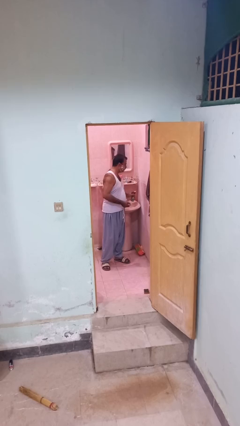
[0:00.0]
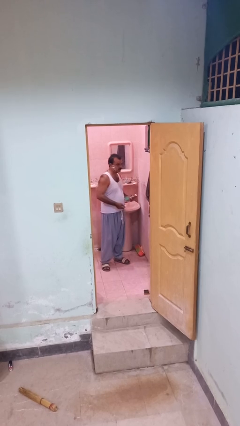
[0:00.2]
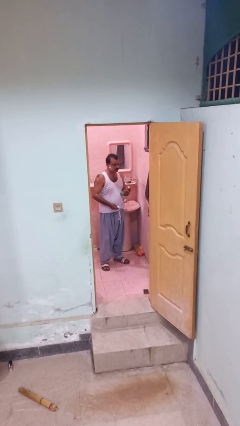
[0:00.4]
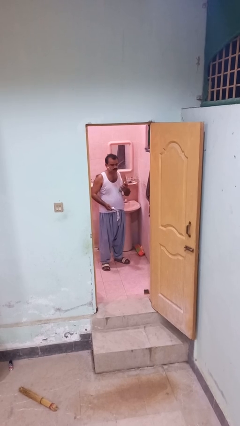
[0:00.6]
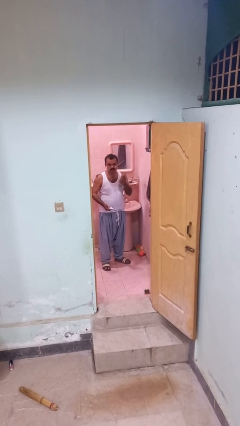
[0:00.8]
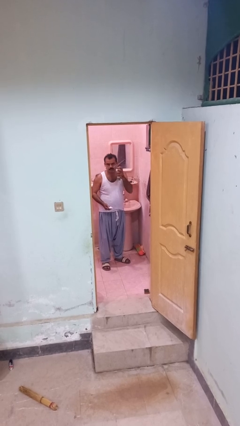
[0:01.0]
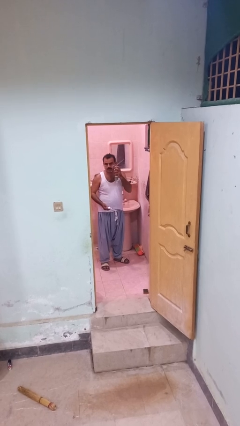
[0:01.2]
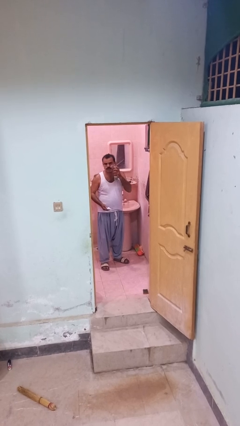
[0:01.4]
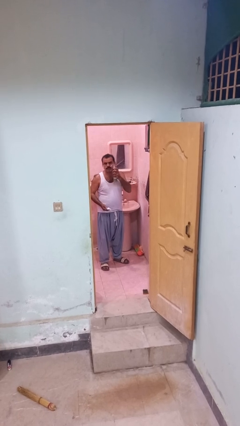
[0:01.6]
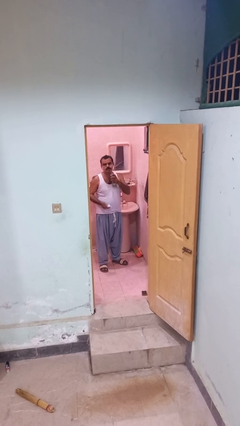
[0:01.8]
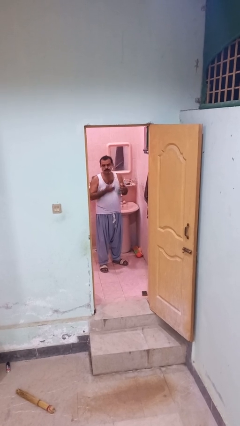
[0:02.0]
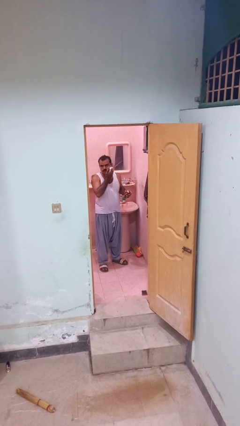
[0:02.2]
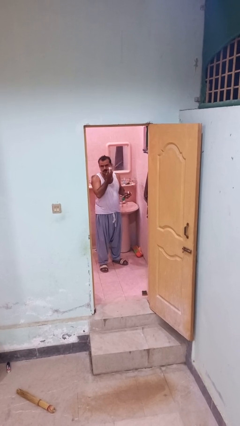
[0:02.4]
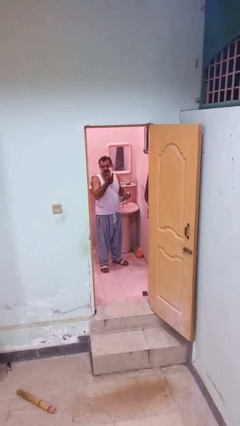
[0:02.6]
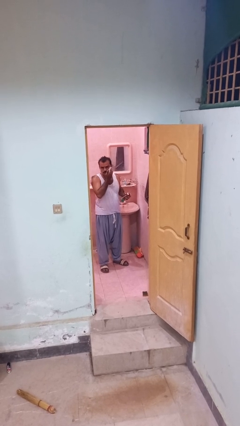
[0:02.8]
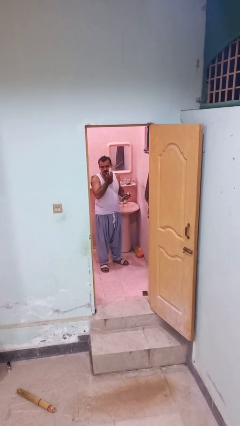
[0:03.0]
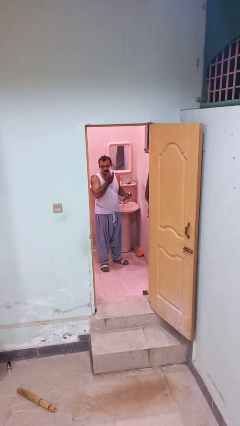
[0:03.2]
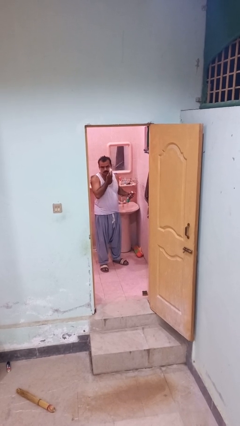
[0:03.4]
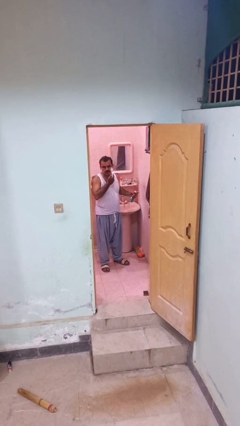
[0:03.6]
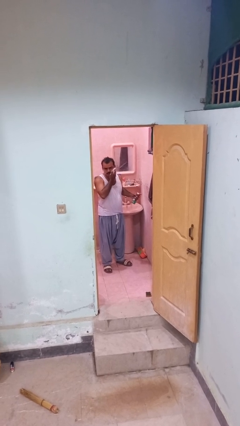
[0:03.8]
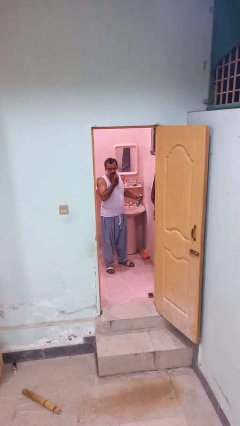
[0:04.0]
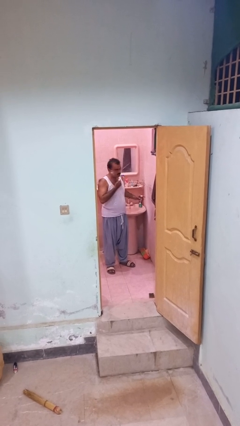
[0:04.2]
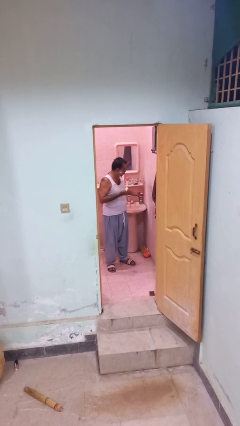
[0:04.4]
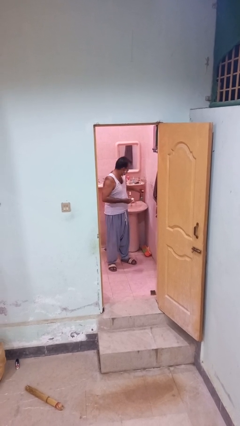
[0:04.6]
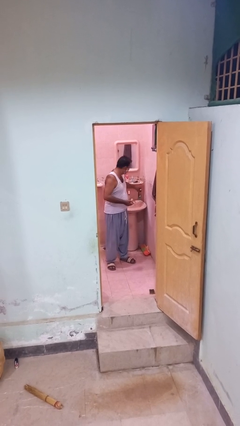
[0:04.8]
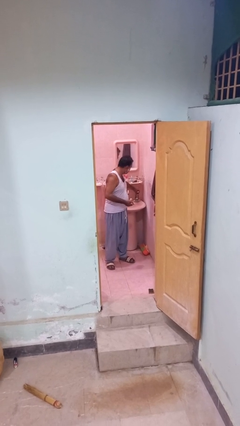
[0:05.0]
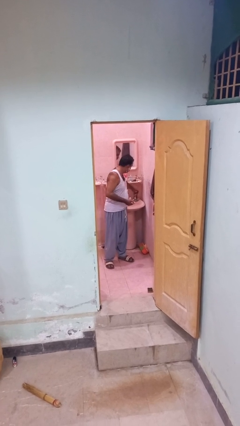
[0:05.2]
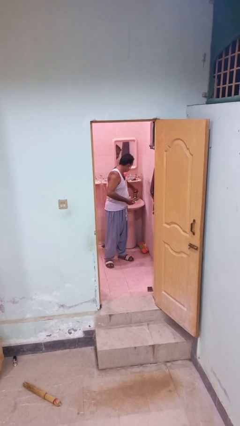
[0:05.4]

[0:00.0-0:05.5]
person applies shaving cream

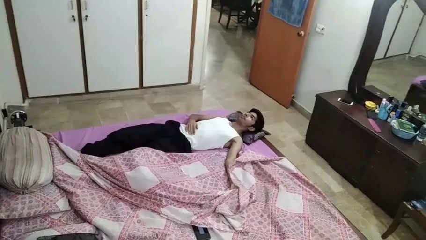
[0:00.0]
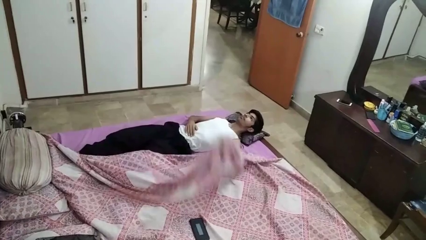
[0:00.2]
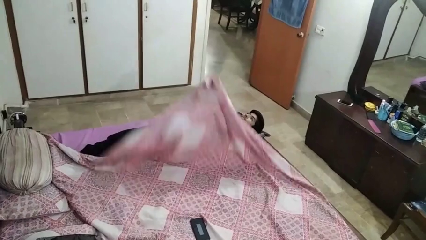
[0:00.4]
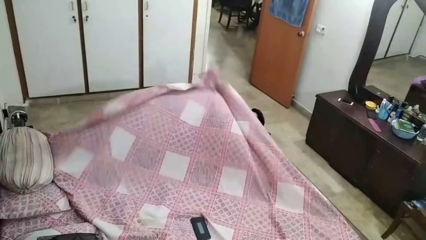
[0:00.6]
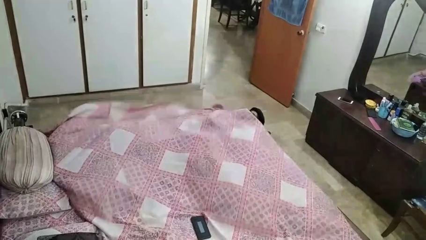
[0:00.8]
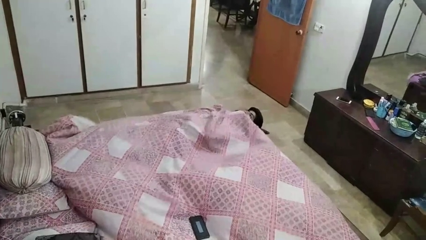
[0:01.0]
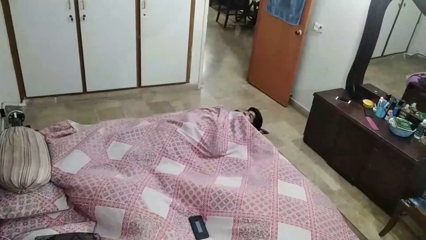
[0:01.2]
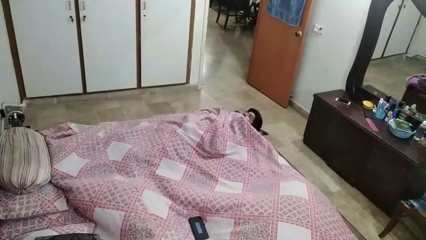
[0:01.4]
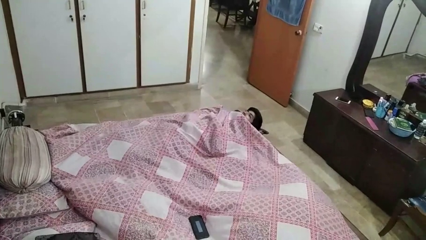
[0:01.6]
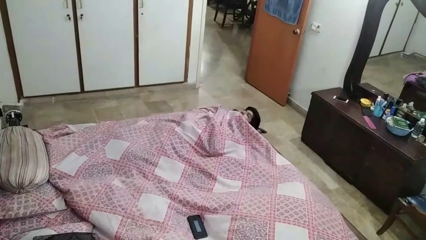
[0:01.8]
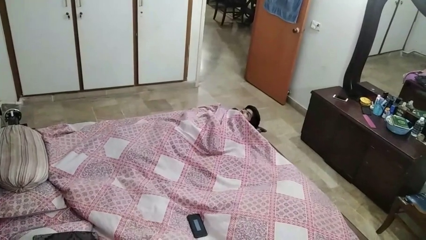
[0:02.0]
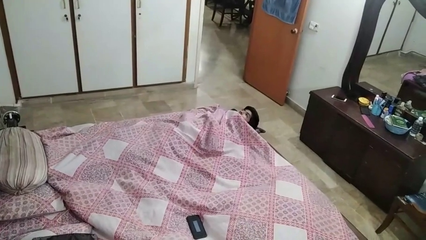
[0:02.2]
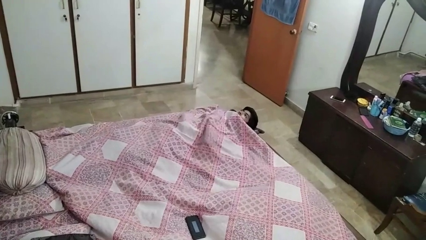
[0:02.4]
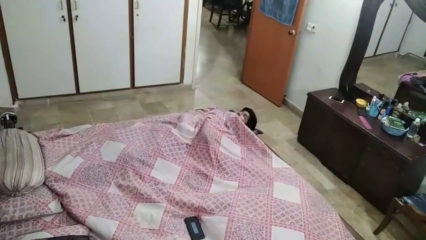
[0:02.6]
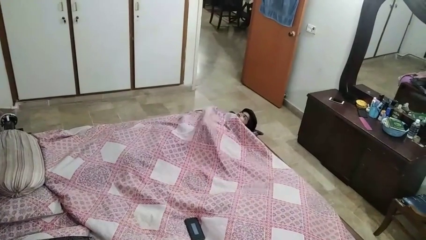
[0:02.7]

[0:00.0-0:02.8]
person covers with bedsheets

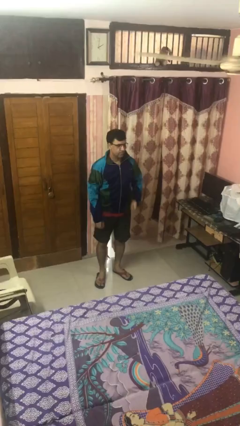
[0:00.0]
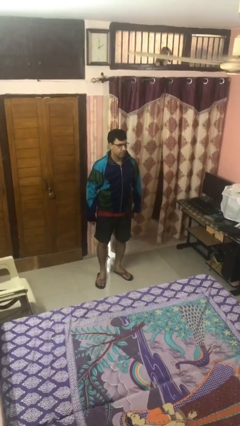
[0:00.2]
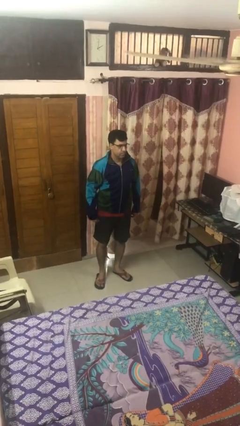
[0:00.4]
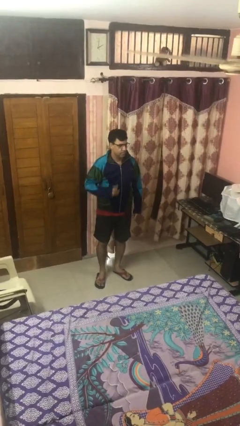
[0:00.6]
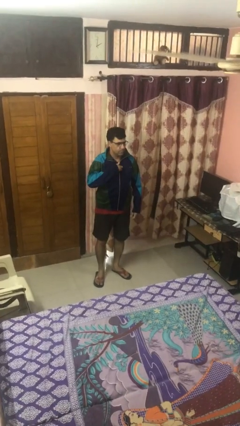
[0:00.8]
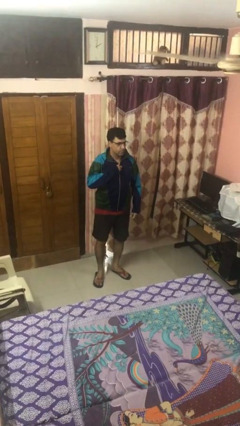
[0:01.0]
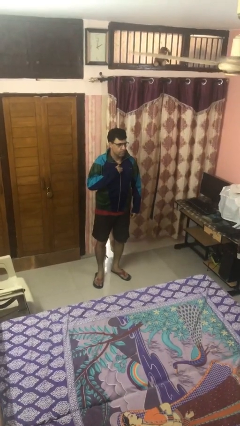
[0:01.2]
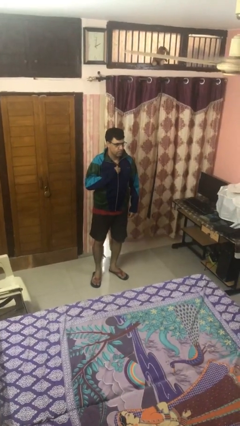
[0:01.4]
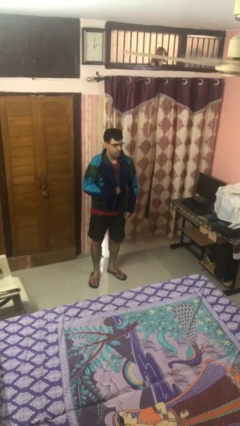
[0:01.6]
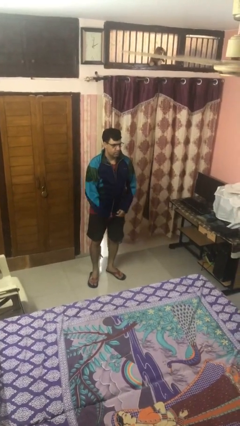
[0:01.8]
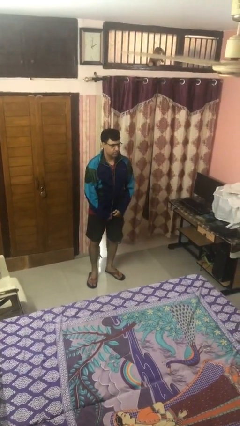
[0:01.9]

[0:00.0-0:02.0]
person unzips jacket

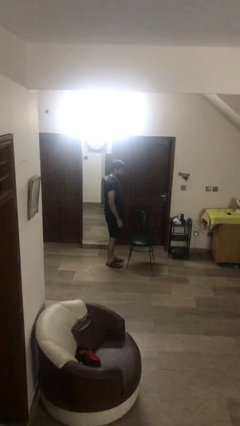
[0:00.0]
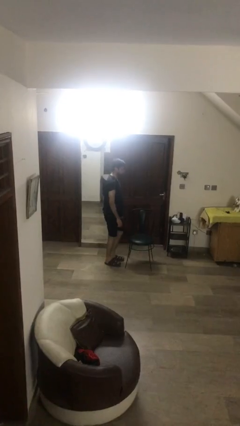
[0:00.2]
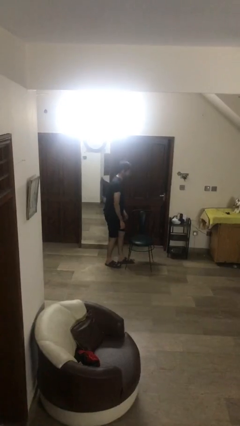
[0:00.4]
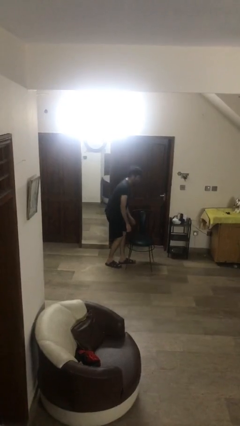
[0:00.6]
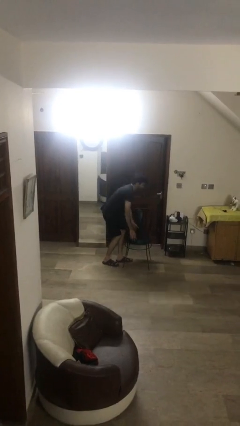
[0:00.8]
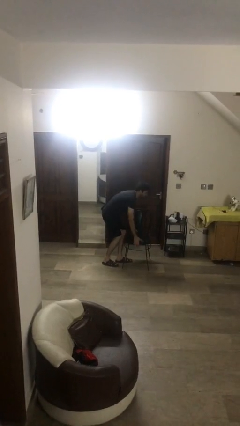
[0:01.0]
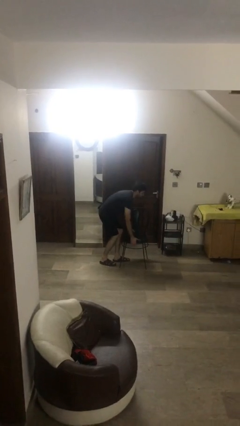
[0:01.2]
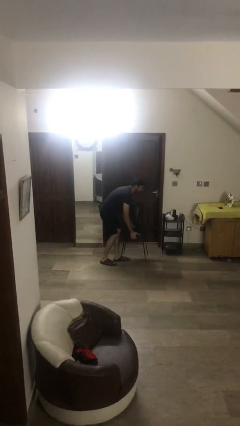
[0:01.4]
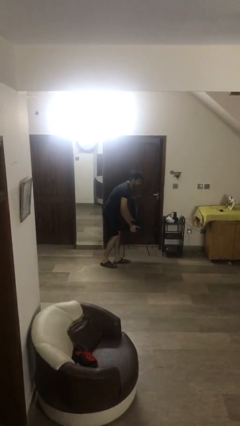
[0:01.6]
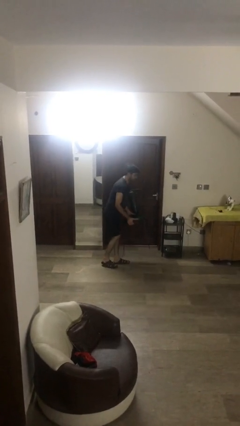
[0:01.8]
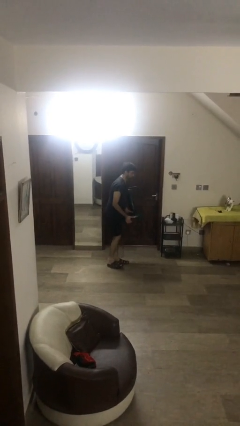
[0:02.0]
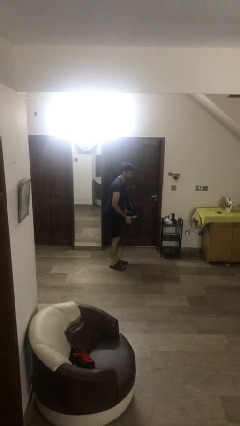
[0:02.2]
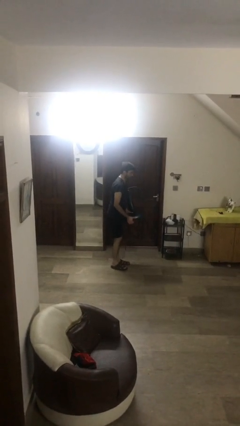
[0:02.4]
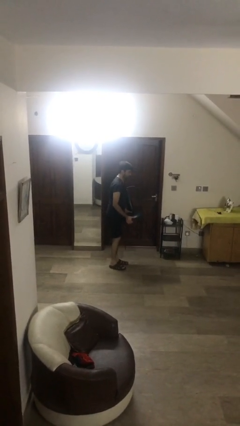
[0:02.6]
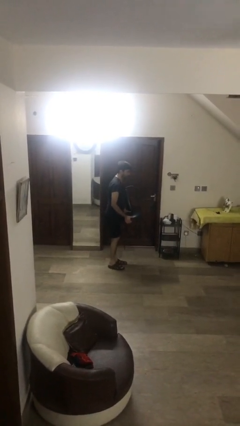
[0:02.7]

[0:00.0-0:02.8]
person picks up object from floor

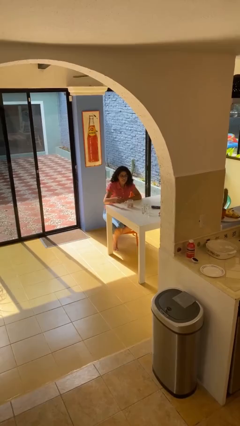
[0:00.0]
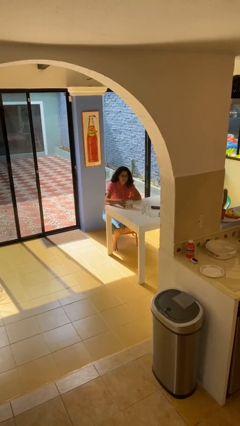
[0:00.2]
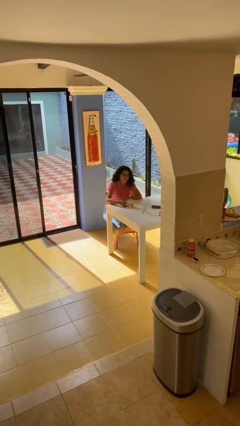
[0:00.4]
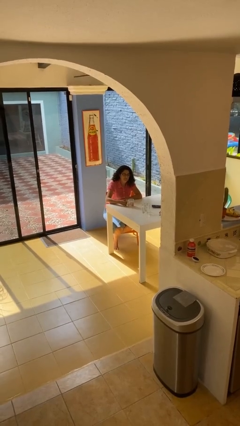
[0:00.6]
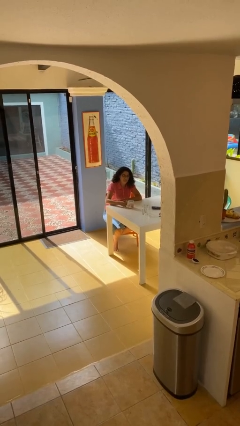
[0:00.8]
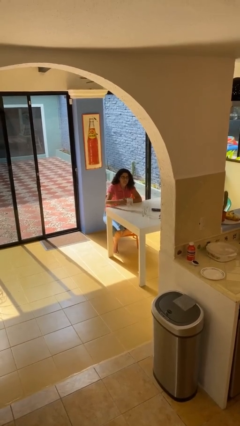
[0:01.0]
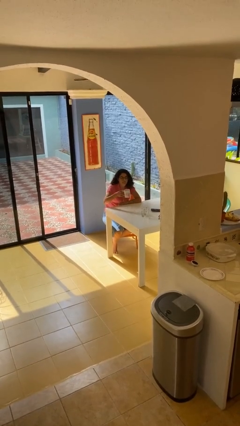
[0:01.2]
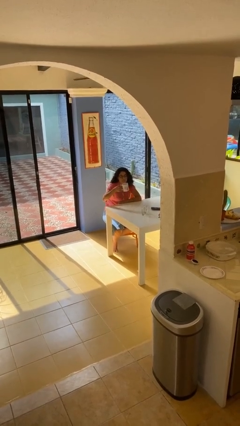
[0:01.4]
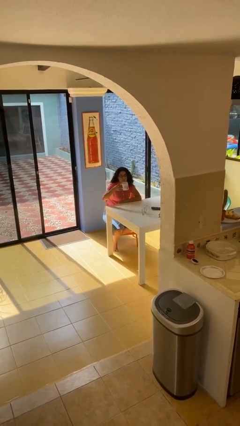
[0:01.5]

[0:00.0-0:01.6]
person picks up object from table

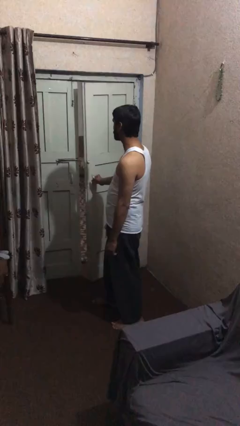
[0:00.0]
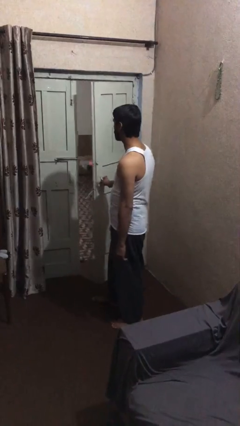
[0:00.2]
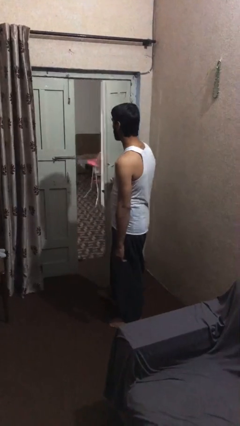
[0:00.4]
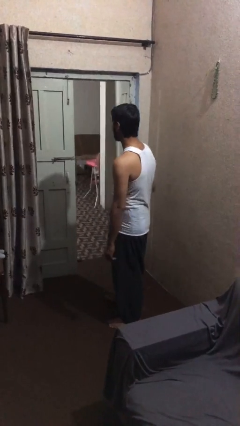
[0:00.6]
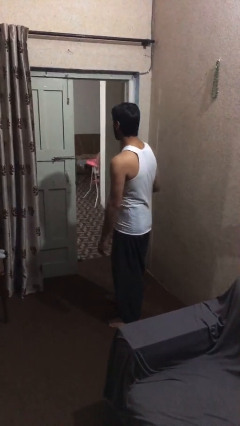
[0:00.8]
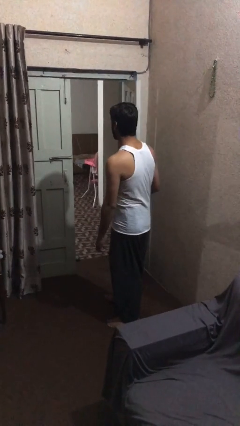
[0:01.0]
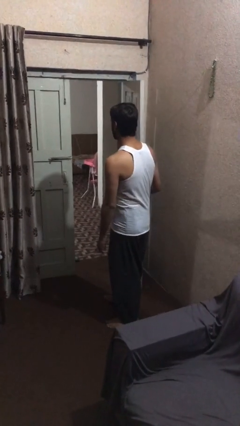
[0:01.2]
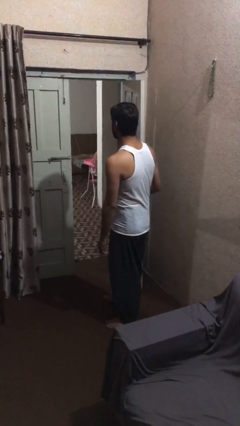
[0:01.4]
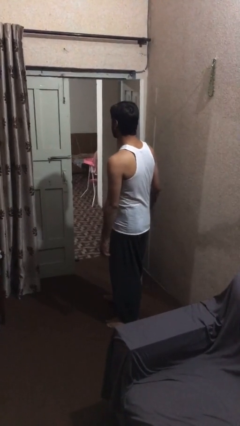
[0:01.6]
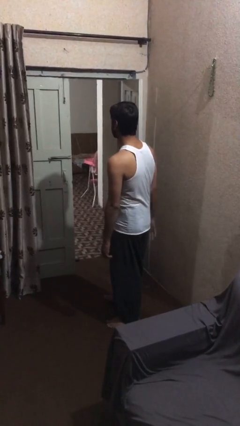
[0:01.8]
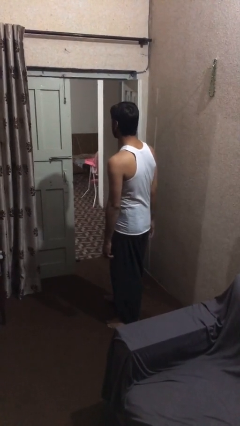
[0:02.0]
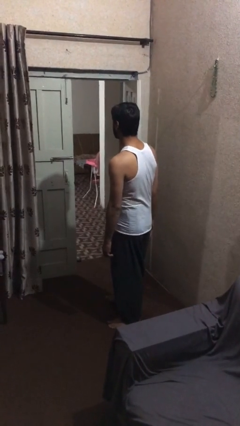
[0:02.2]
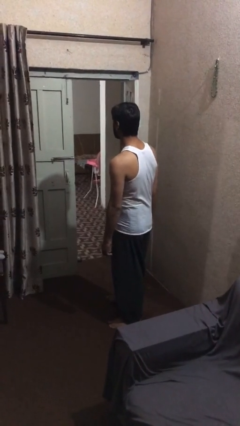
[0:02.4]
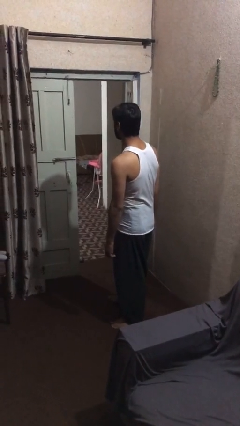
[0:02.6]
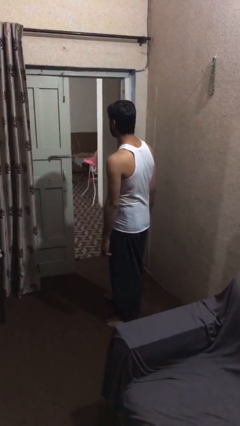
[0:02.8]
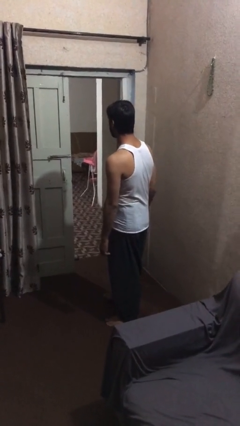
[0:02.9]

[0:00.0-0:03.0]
person opens facility door
